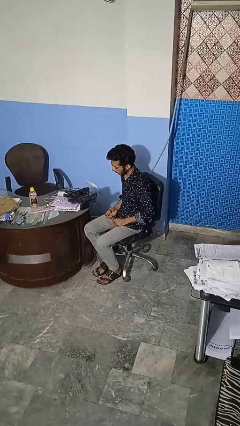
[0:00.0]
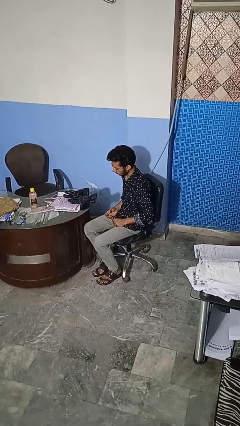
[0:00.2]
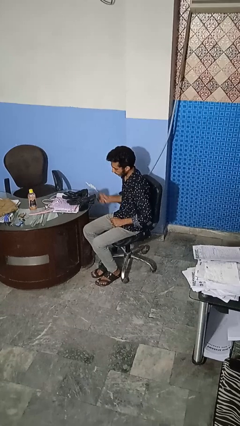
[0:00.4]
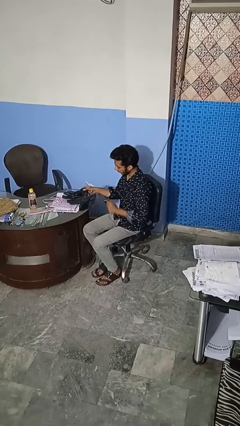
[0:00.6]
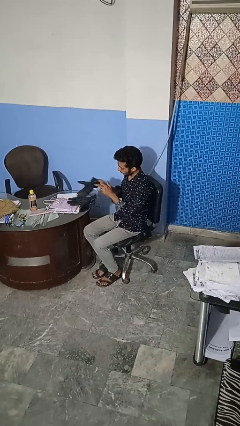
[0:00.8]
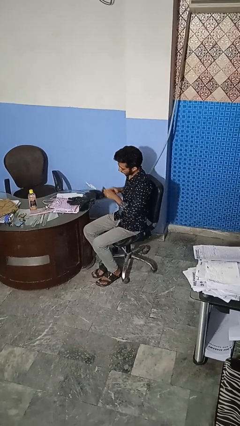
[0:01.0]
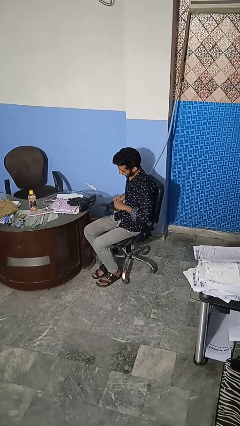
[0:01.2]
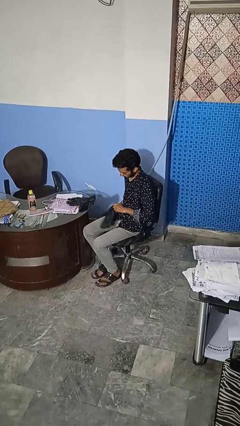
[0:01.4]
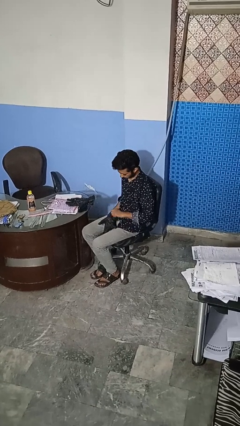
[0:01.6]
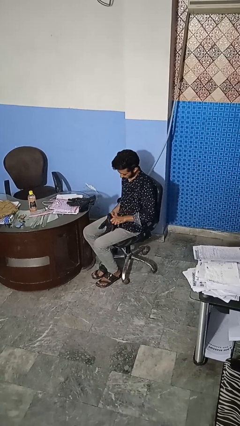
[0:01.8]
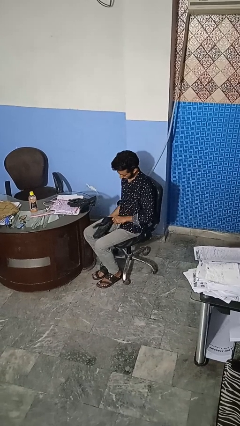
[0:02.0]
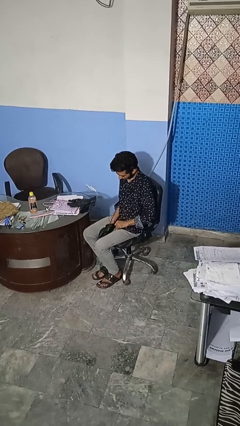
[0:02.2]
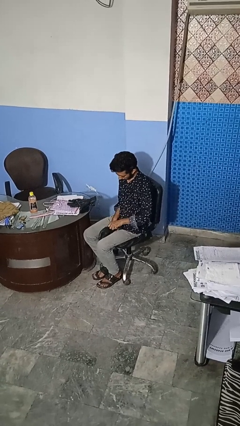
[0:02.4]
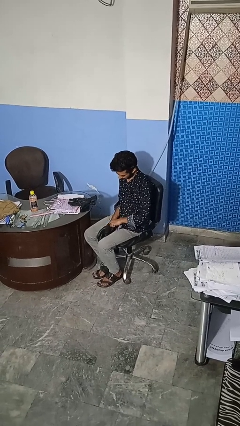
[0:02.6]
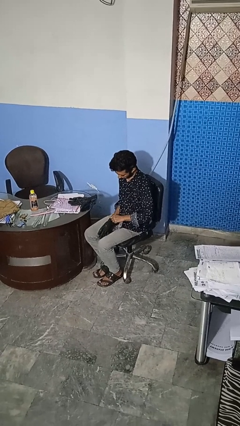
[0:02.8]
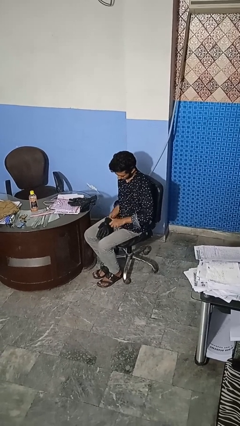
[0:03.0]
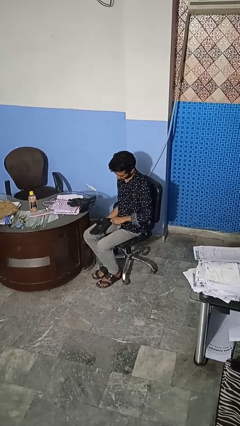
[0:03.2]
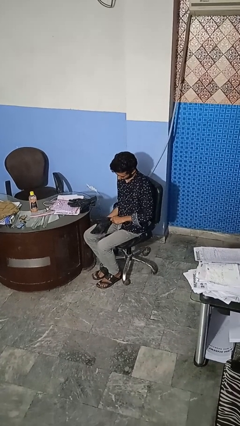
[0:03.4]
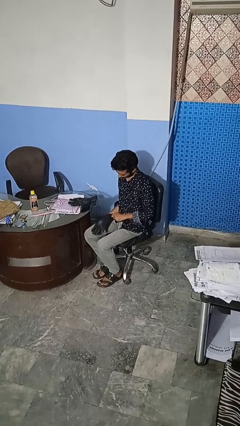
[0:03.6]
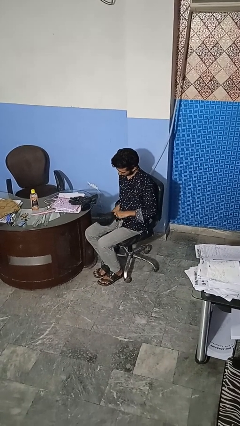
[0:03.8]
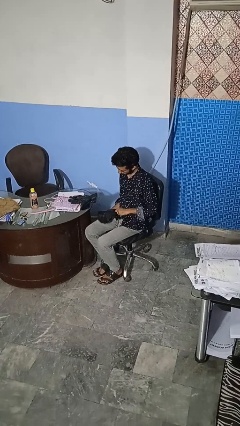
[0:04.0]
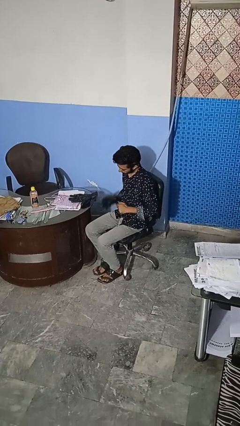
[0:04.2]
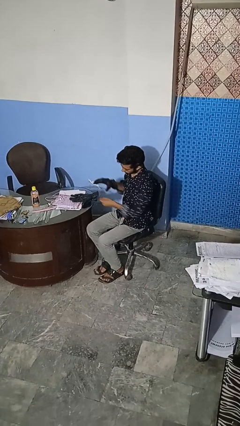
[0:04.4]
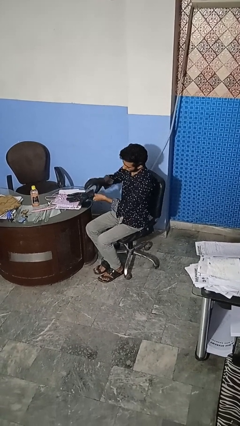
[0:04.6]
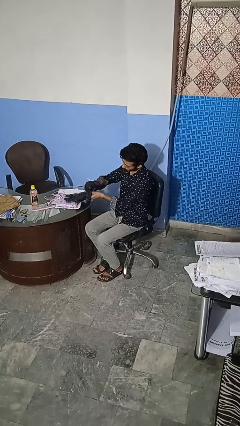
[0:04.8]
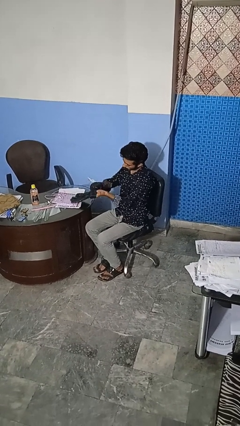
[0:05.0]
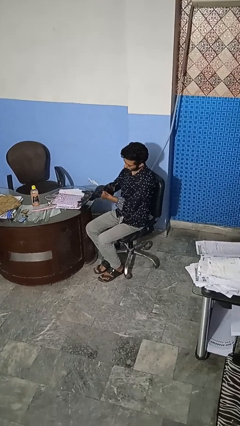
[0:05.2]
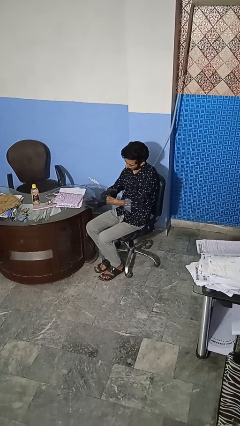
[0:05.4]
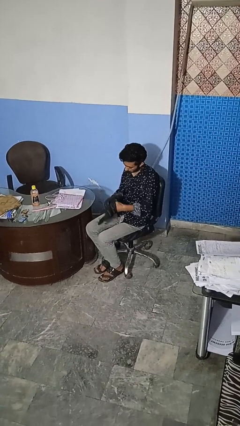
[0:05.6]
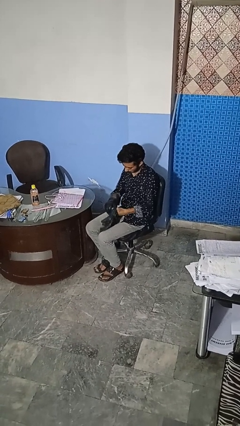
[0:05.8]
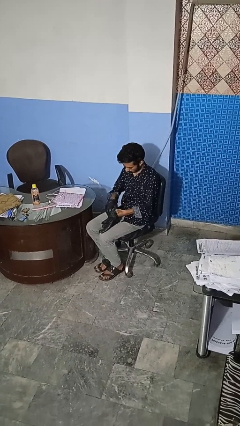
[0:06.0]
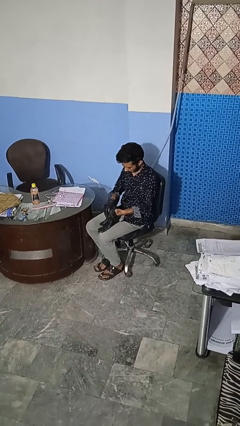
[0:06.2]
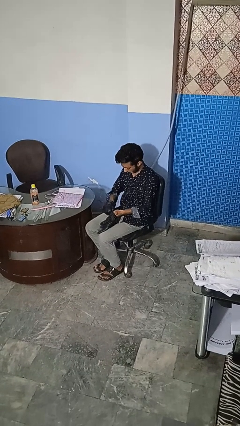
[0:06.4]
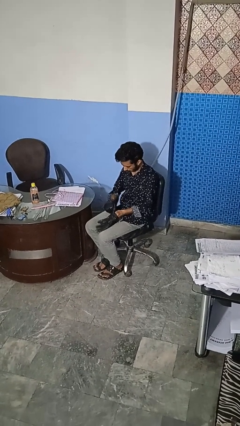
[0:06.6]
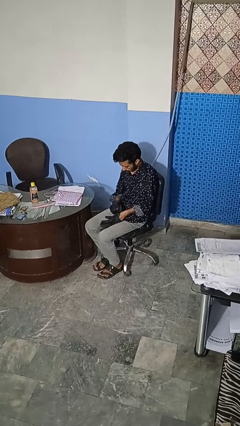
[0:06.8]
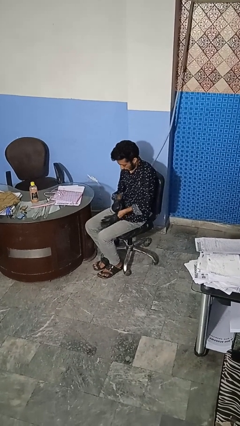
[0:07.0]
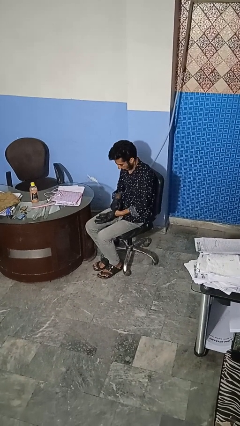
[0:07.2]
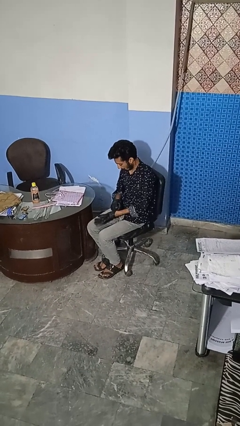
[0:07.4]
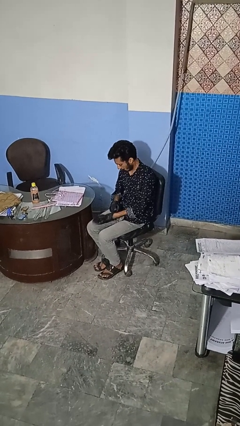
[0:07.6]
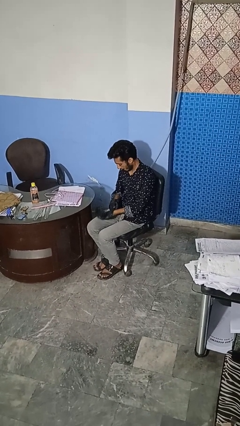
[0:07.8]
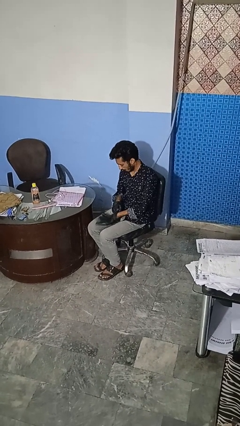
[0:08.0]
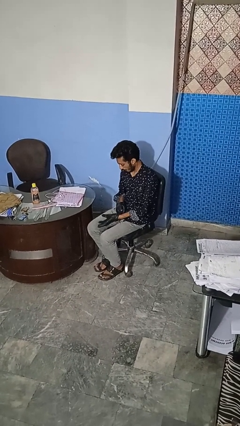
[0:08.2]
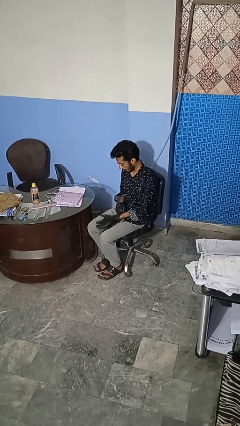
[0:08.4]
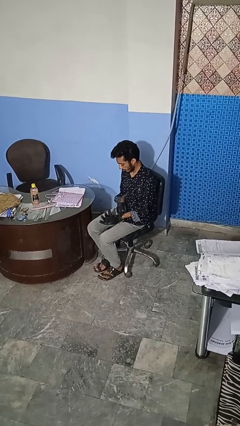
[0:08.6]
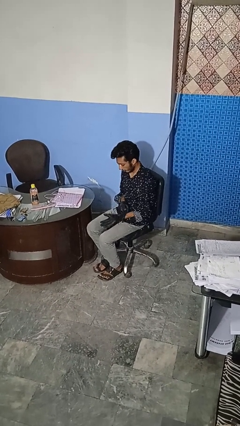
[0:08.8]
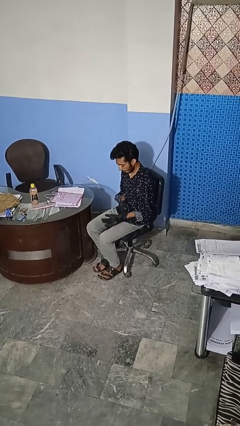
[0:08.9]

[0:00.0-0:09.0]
person puts on gloves

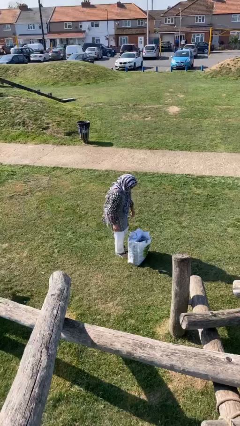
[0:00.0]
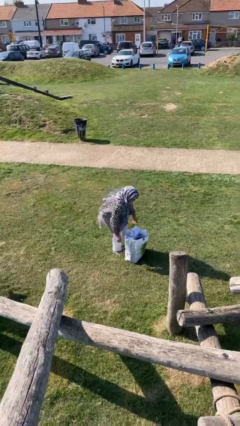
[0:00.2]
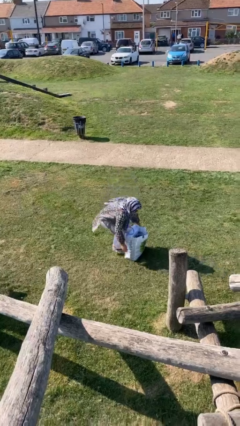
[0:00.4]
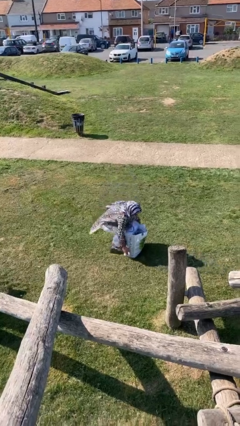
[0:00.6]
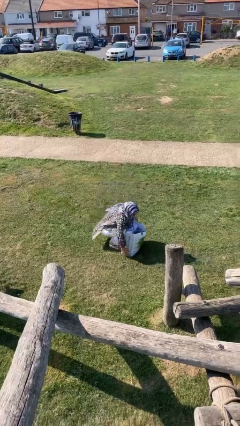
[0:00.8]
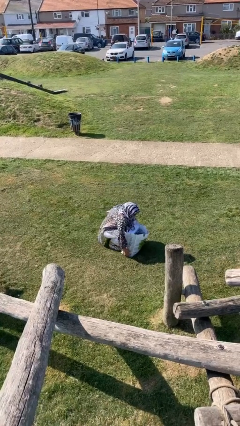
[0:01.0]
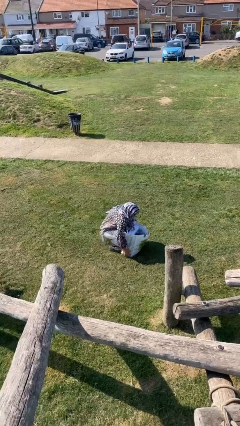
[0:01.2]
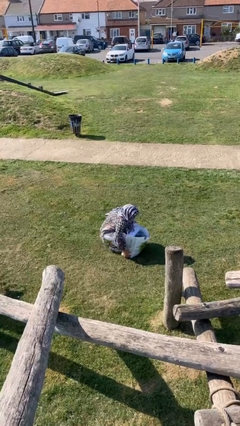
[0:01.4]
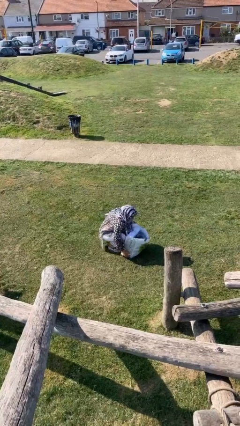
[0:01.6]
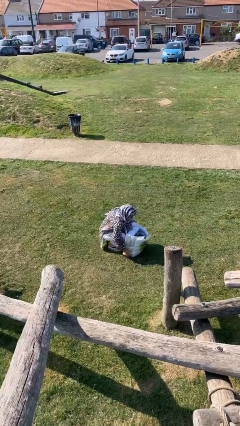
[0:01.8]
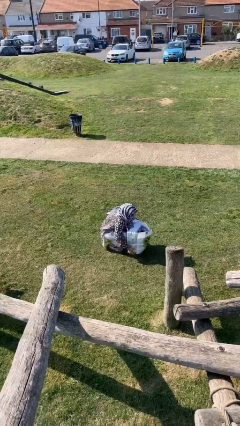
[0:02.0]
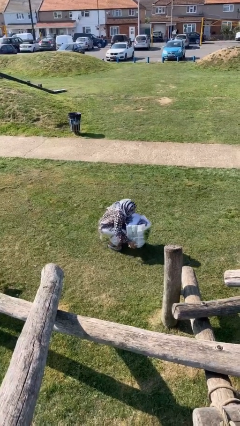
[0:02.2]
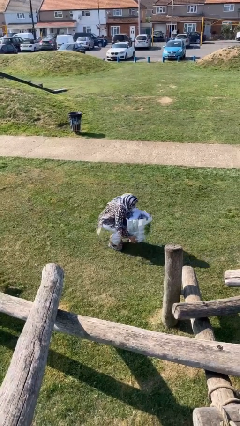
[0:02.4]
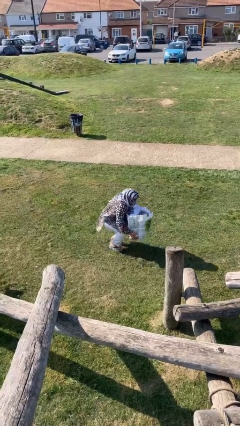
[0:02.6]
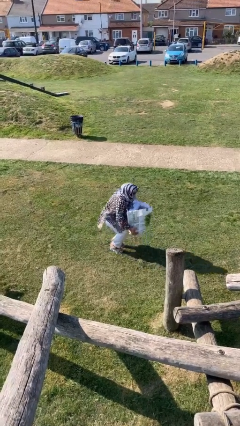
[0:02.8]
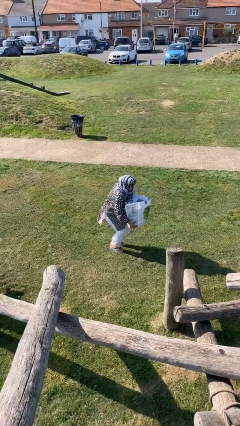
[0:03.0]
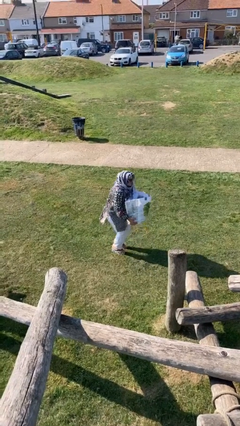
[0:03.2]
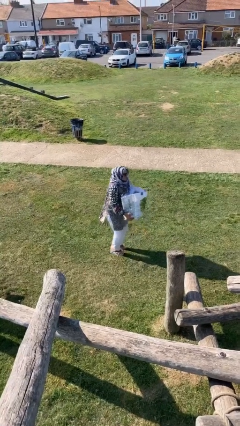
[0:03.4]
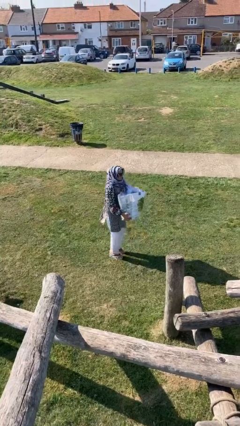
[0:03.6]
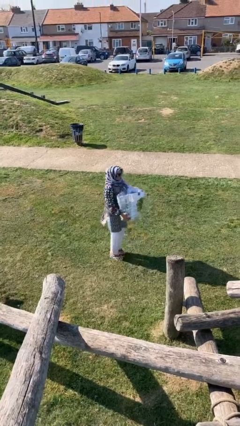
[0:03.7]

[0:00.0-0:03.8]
person picks up object from floor

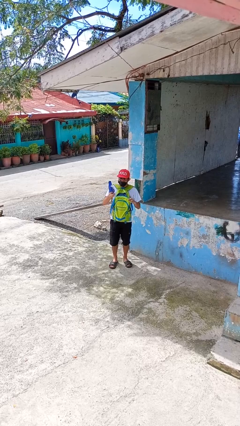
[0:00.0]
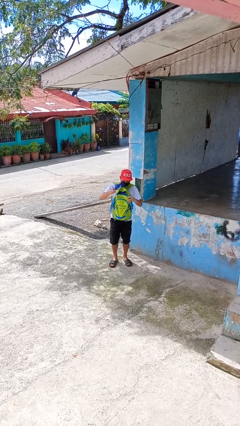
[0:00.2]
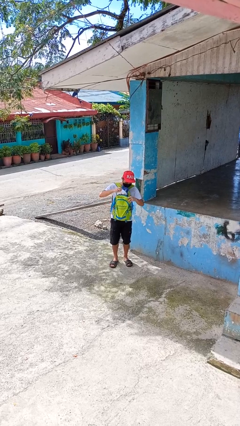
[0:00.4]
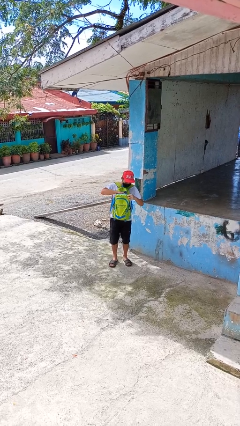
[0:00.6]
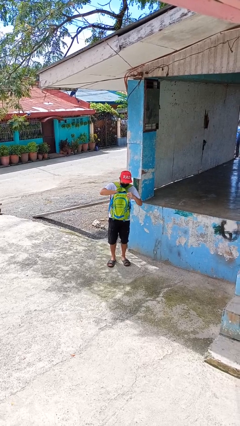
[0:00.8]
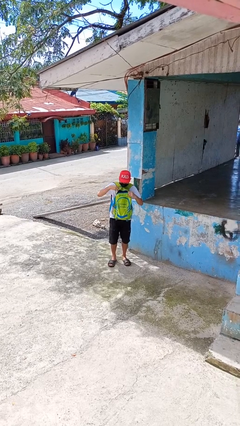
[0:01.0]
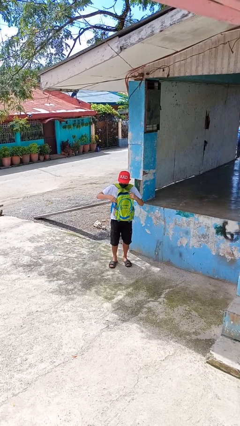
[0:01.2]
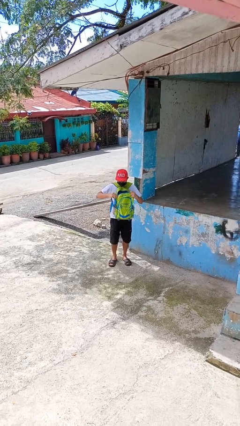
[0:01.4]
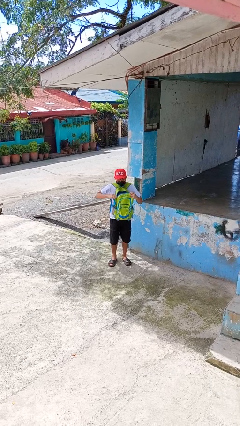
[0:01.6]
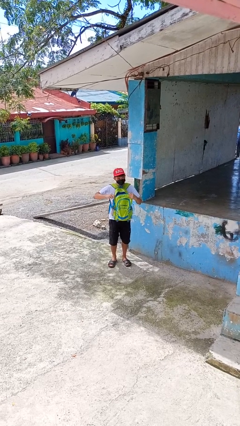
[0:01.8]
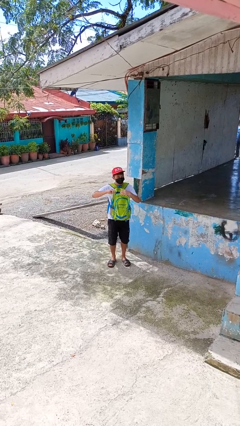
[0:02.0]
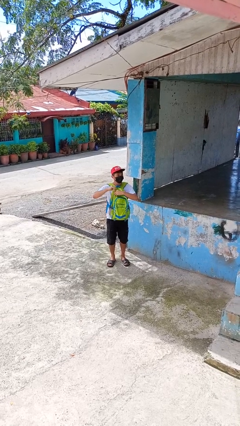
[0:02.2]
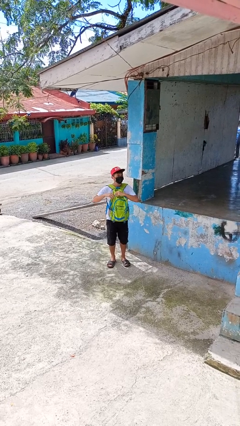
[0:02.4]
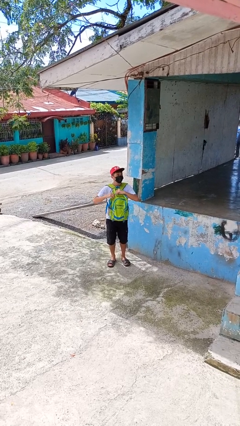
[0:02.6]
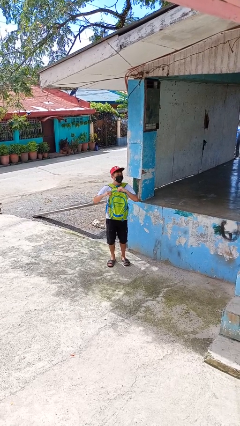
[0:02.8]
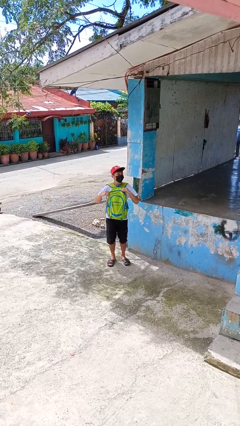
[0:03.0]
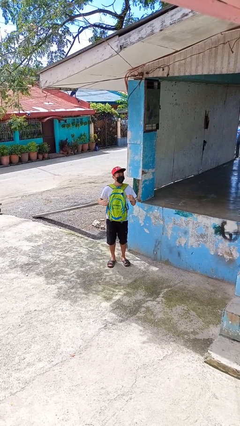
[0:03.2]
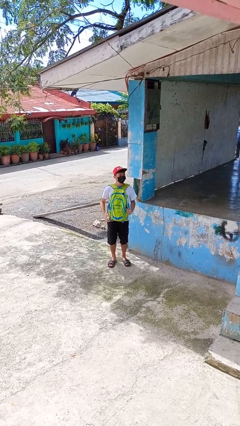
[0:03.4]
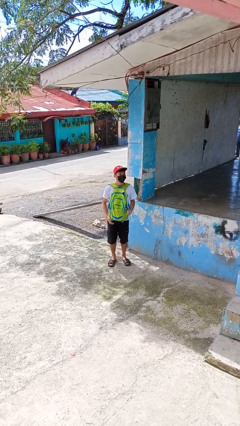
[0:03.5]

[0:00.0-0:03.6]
person puts object into backpack

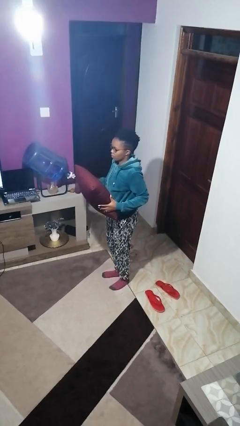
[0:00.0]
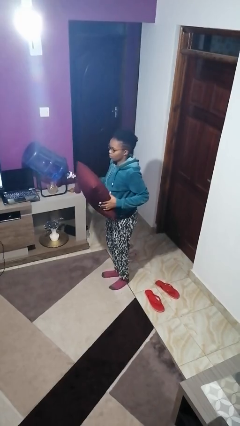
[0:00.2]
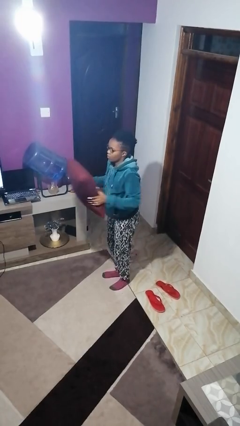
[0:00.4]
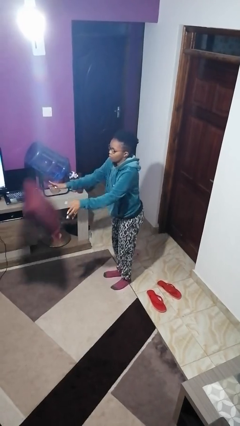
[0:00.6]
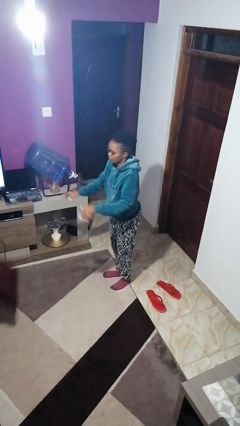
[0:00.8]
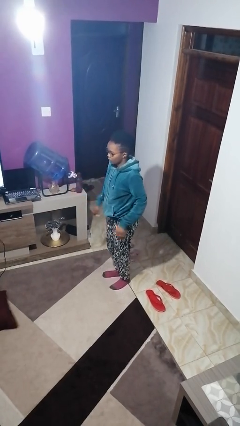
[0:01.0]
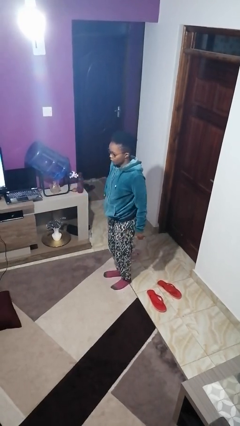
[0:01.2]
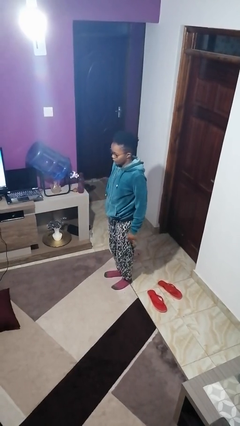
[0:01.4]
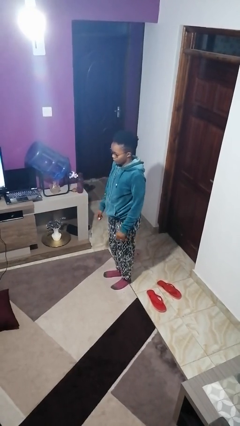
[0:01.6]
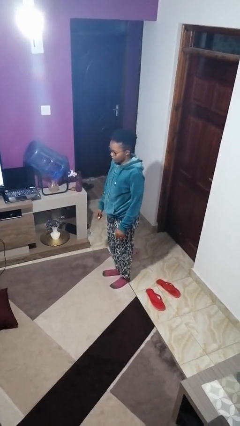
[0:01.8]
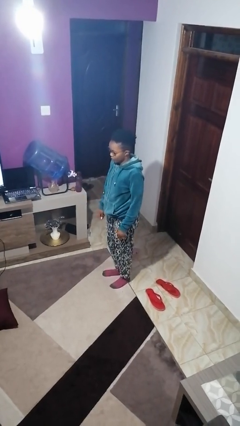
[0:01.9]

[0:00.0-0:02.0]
person throws object to ground
